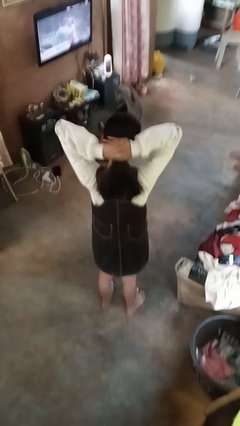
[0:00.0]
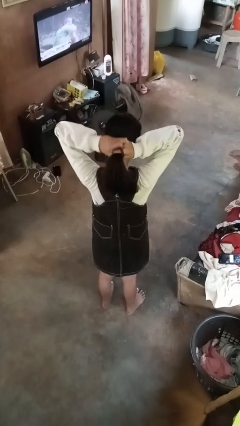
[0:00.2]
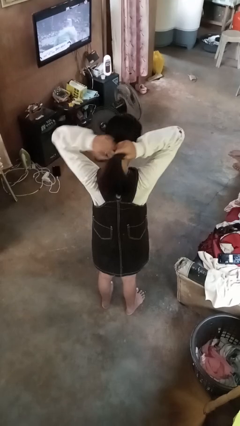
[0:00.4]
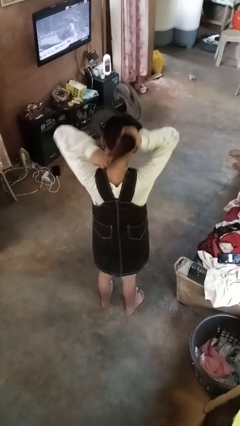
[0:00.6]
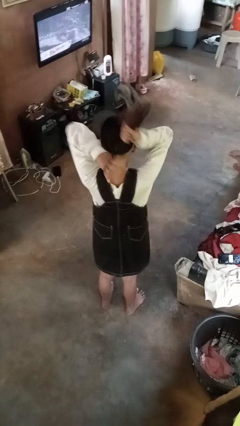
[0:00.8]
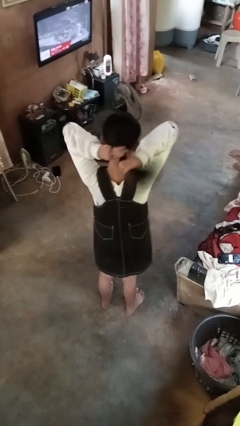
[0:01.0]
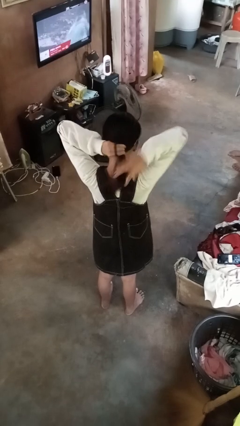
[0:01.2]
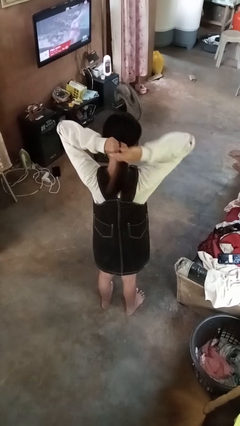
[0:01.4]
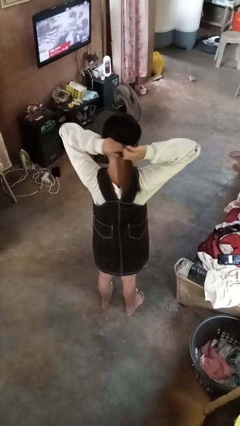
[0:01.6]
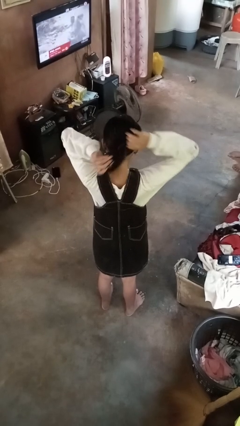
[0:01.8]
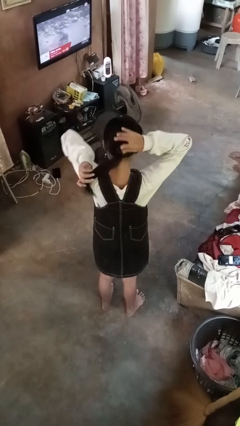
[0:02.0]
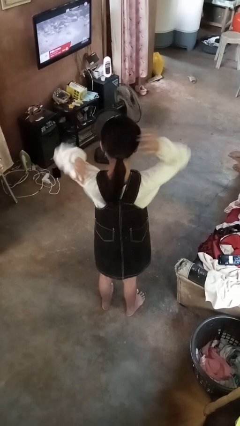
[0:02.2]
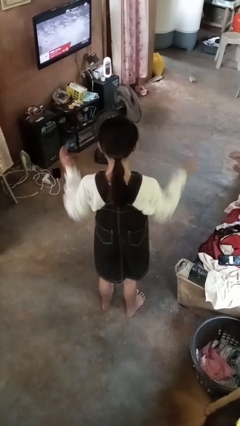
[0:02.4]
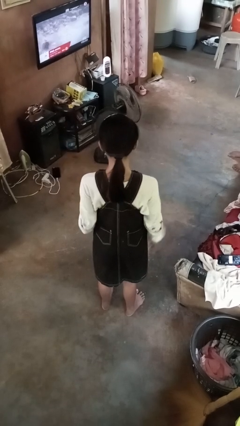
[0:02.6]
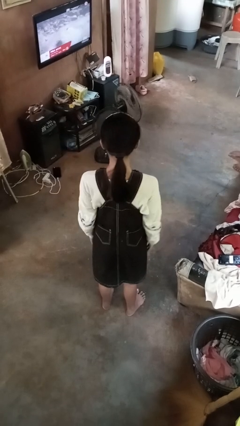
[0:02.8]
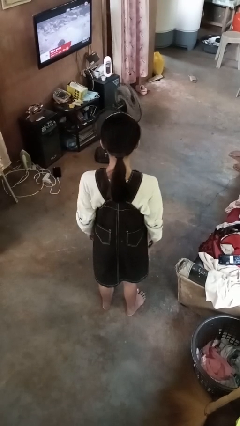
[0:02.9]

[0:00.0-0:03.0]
person puts hair in ponytail

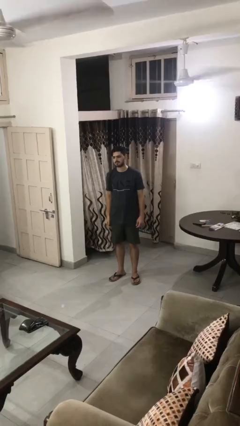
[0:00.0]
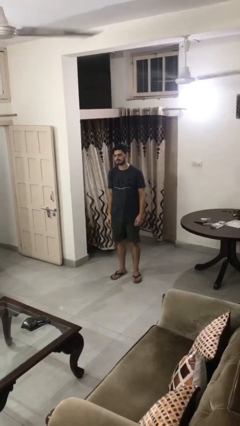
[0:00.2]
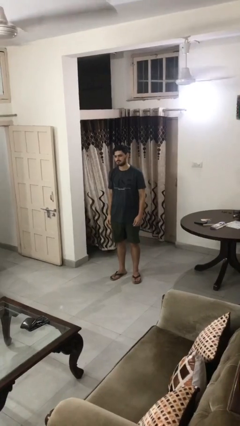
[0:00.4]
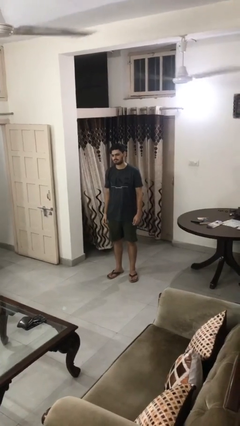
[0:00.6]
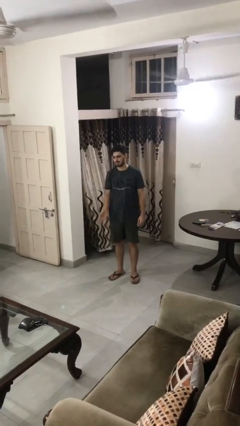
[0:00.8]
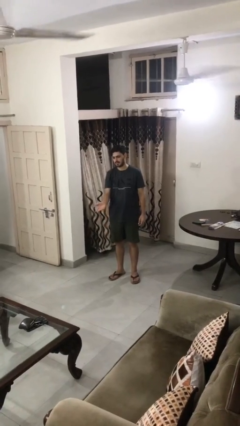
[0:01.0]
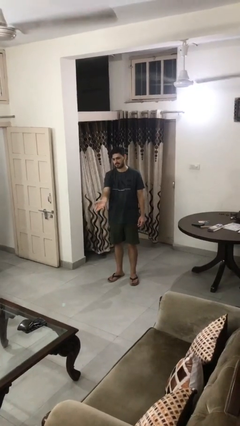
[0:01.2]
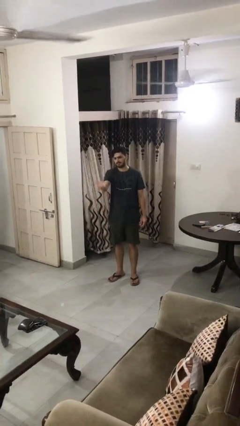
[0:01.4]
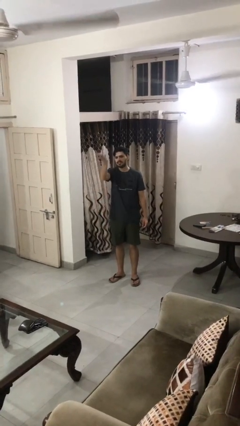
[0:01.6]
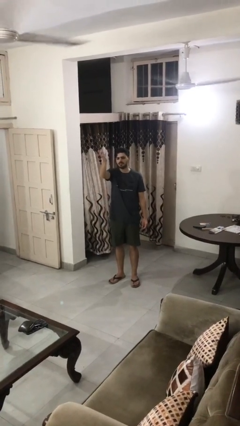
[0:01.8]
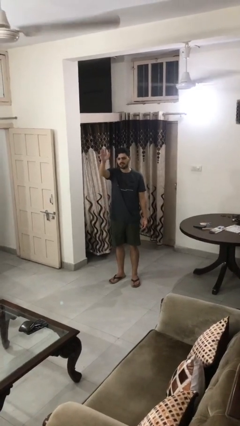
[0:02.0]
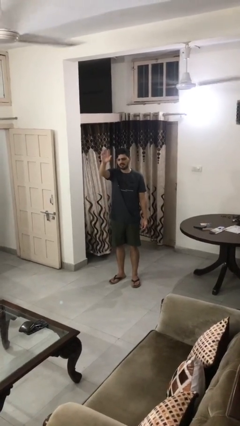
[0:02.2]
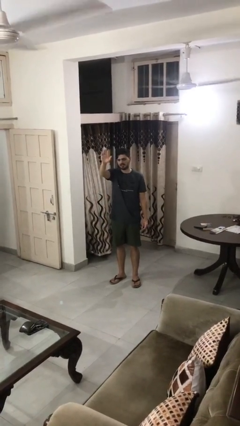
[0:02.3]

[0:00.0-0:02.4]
person gestures swipe up

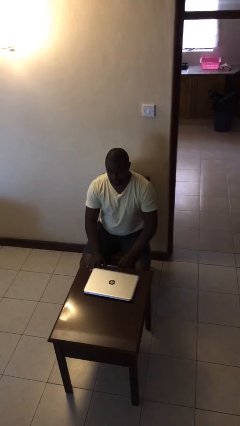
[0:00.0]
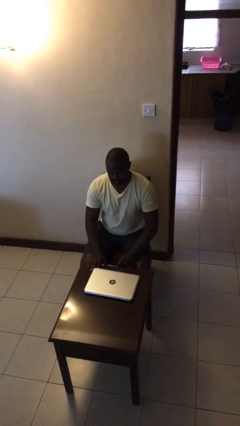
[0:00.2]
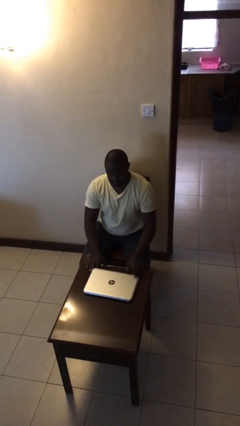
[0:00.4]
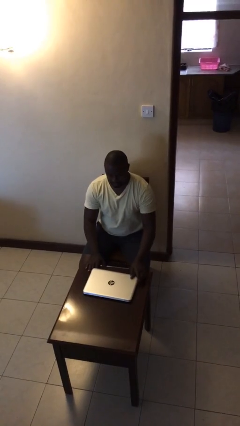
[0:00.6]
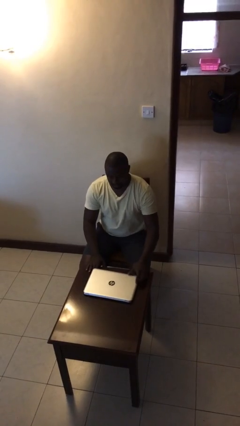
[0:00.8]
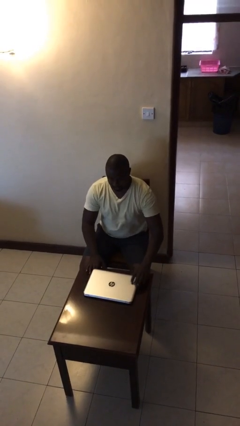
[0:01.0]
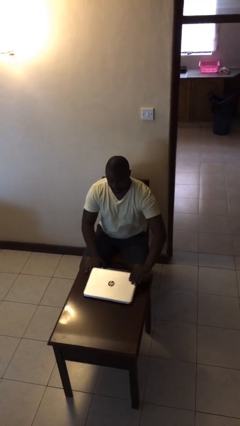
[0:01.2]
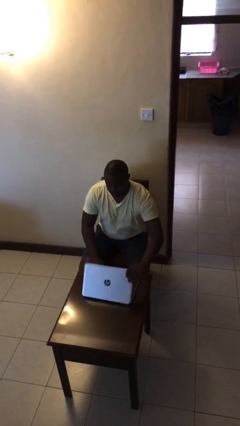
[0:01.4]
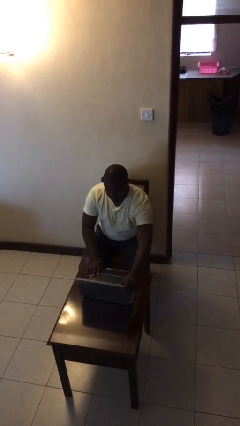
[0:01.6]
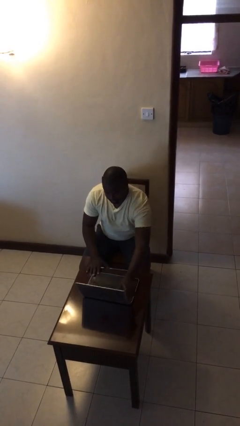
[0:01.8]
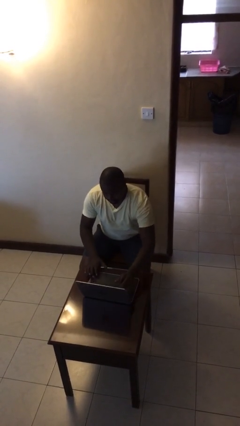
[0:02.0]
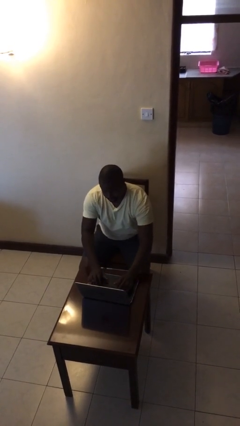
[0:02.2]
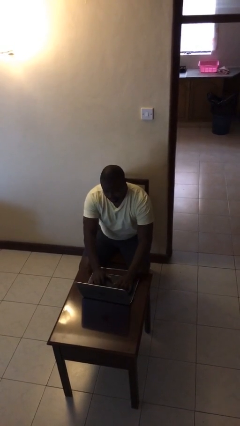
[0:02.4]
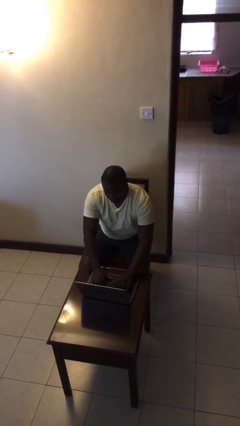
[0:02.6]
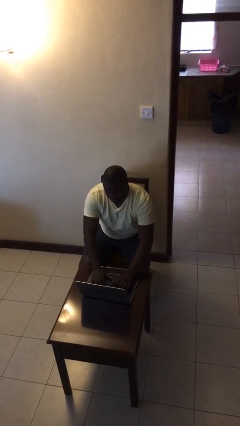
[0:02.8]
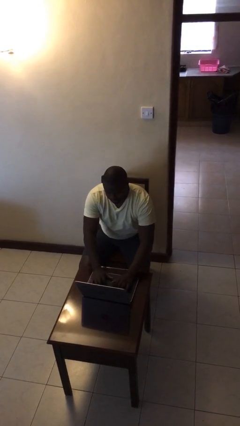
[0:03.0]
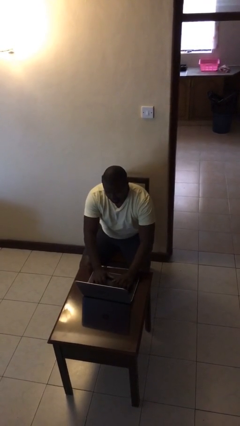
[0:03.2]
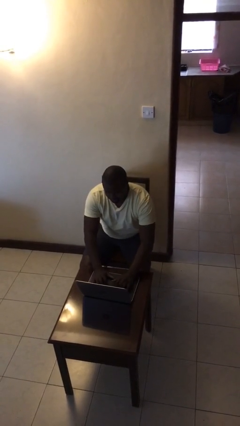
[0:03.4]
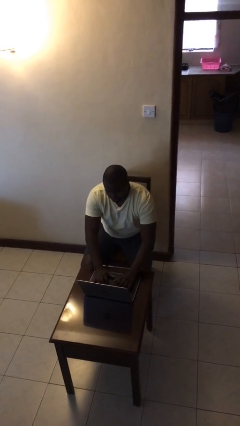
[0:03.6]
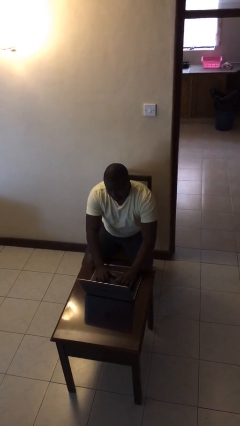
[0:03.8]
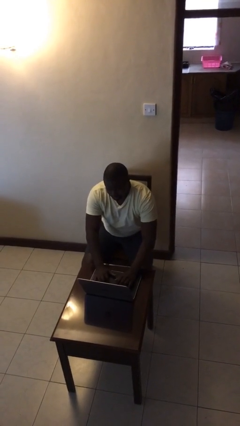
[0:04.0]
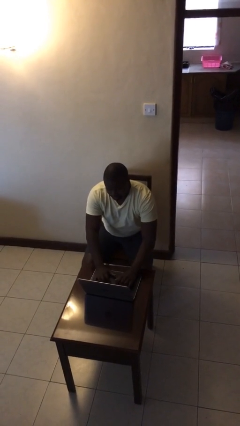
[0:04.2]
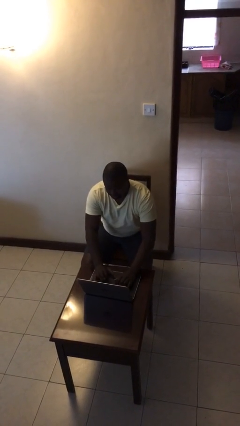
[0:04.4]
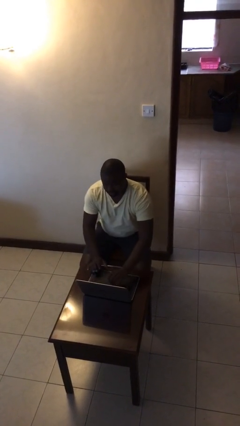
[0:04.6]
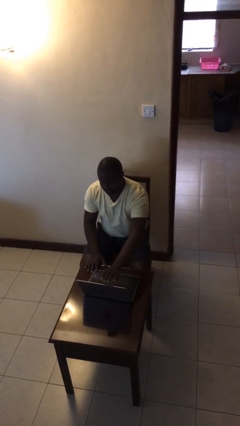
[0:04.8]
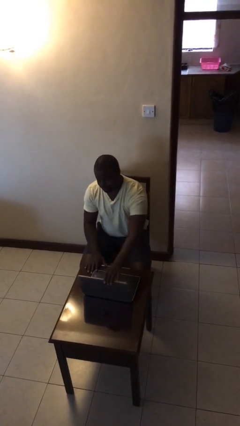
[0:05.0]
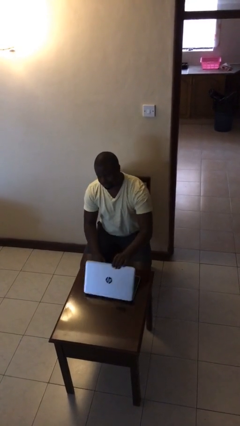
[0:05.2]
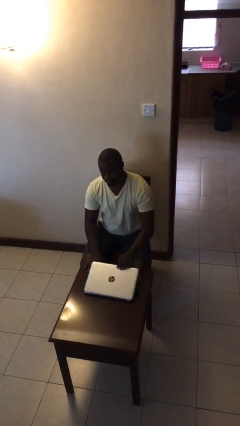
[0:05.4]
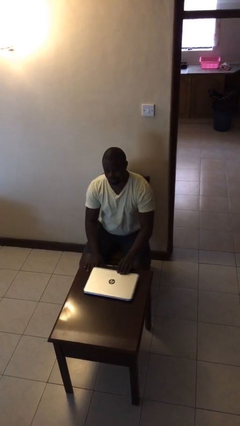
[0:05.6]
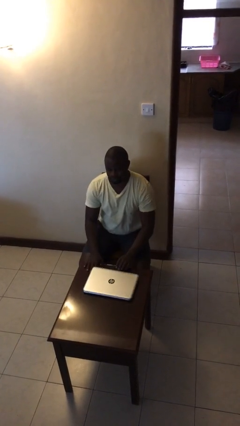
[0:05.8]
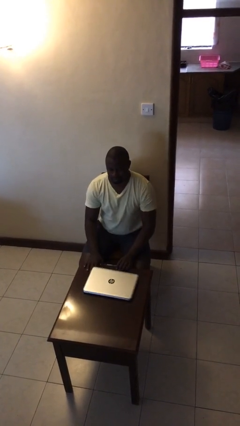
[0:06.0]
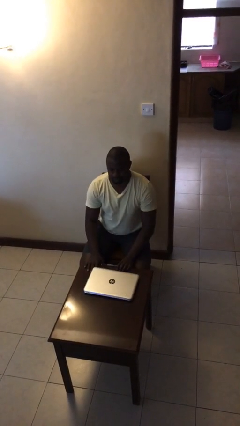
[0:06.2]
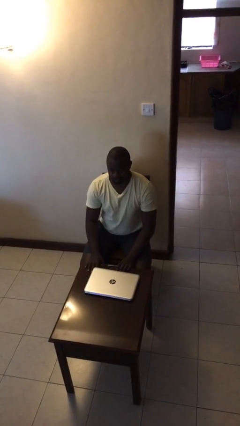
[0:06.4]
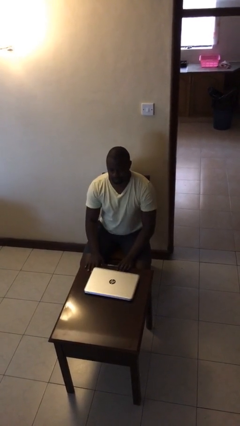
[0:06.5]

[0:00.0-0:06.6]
person interacts with laptop

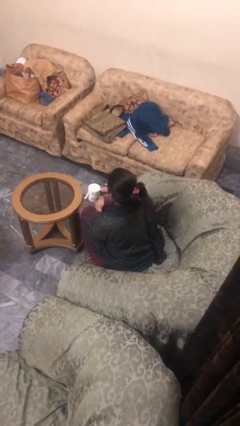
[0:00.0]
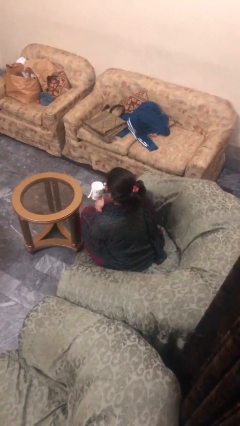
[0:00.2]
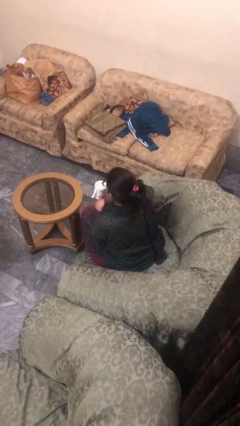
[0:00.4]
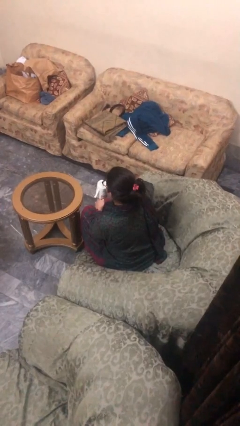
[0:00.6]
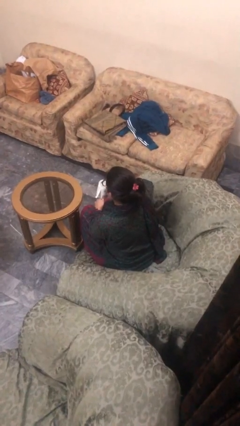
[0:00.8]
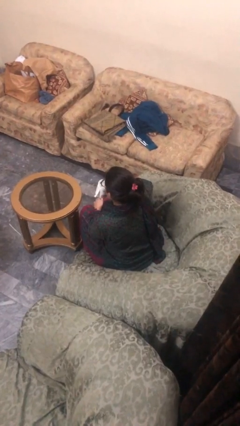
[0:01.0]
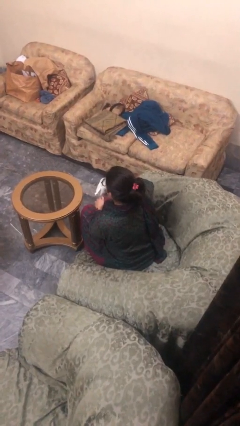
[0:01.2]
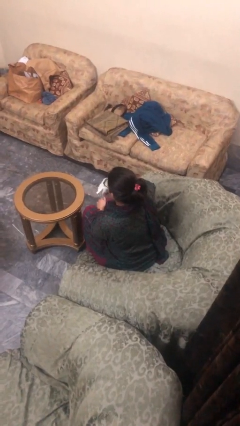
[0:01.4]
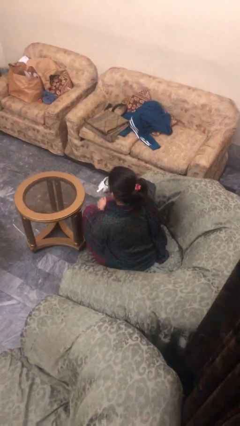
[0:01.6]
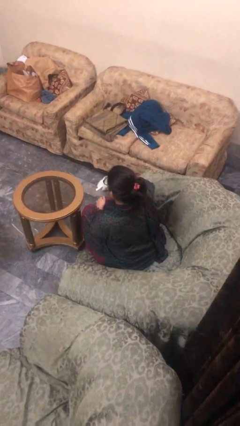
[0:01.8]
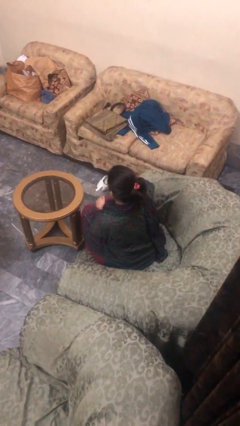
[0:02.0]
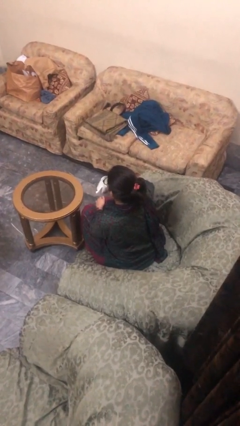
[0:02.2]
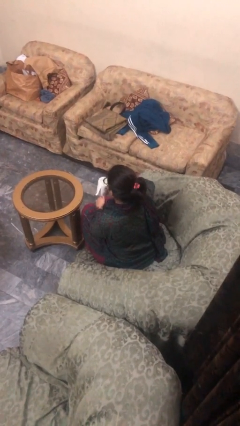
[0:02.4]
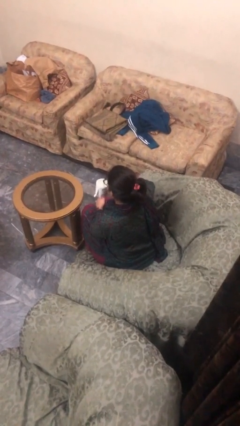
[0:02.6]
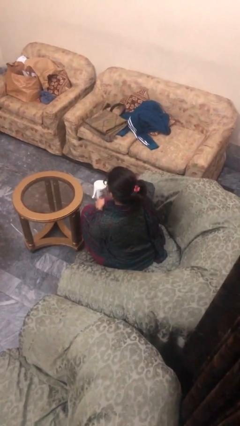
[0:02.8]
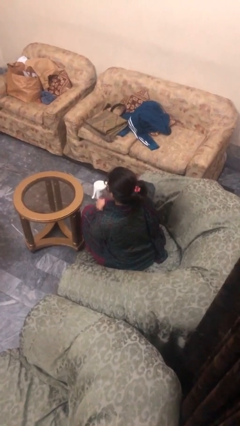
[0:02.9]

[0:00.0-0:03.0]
person drinks from mug

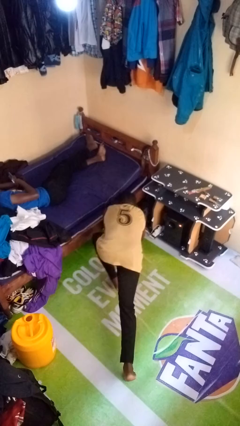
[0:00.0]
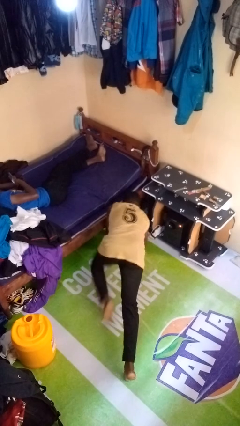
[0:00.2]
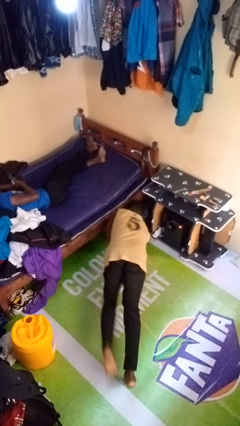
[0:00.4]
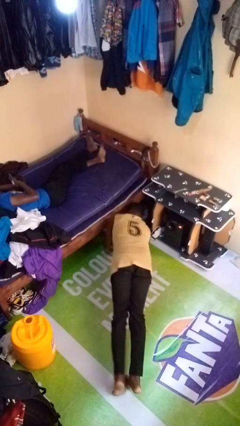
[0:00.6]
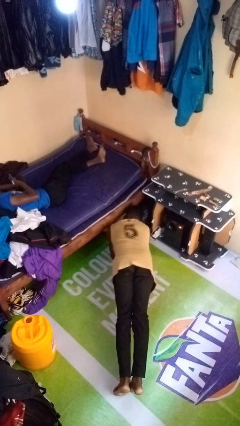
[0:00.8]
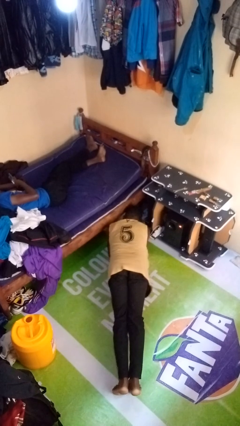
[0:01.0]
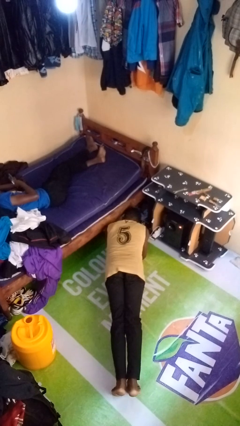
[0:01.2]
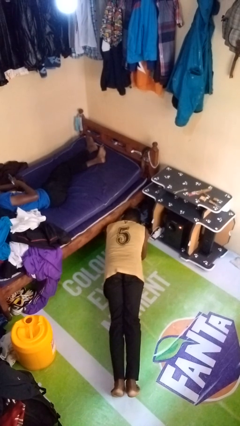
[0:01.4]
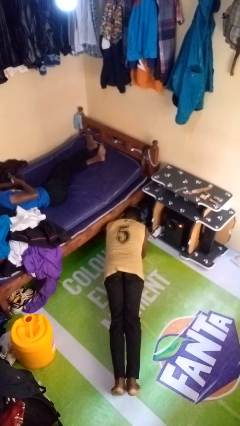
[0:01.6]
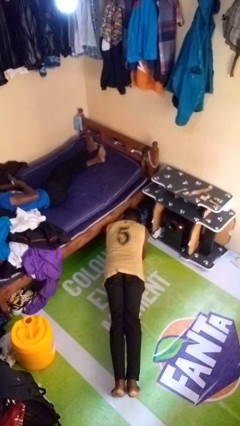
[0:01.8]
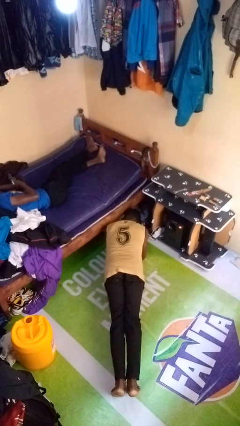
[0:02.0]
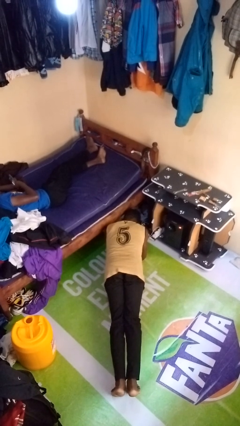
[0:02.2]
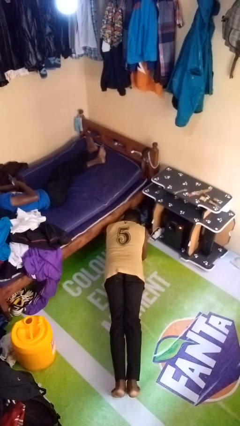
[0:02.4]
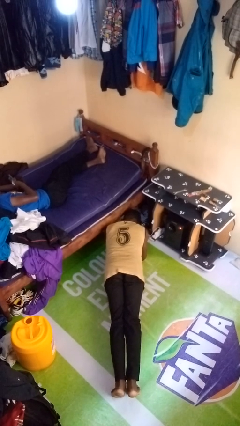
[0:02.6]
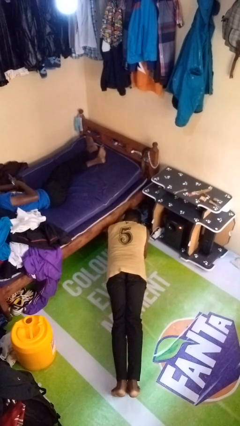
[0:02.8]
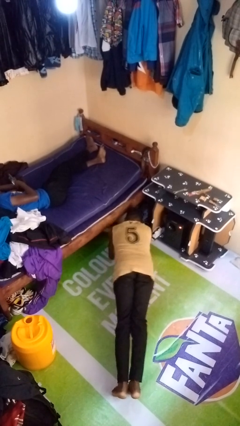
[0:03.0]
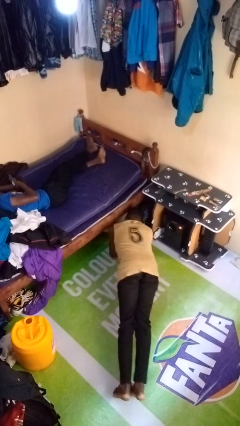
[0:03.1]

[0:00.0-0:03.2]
person exercises with plank
